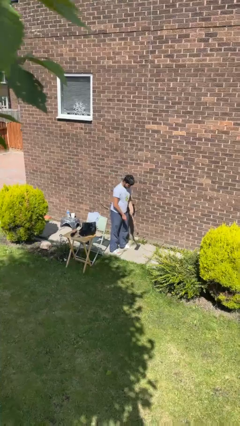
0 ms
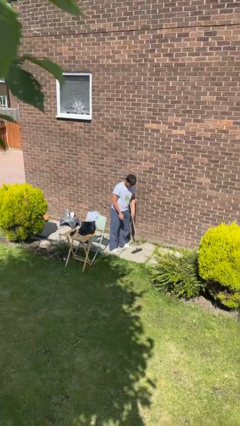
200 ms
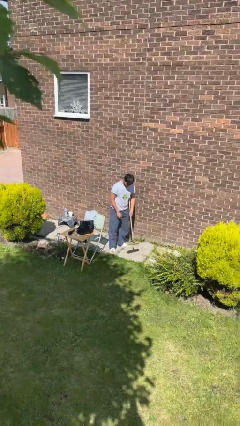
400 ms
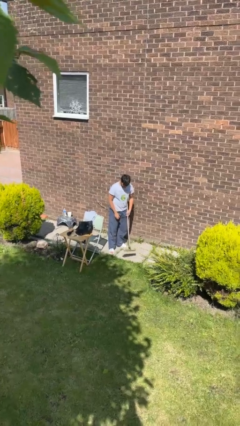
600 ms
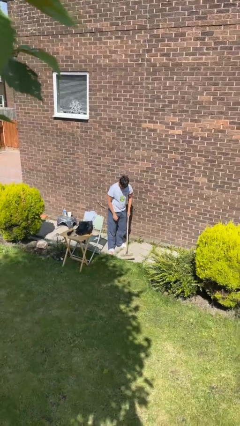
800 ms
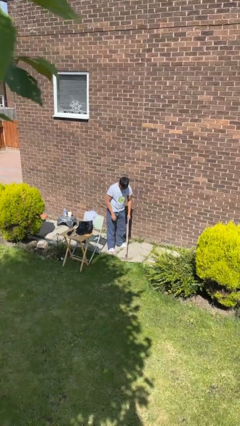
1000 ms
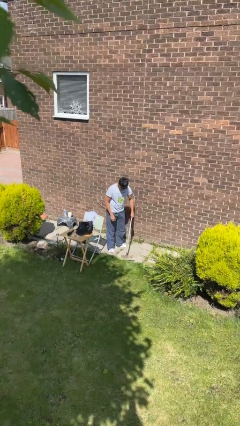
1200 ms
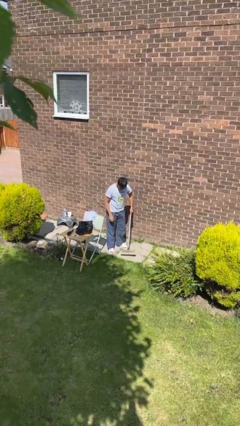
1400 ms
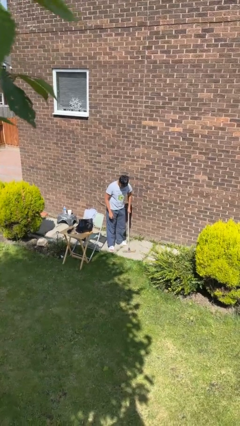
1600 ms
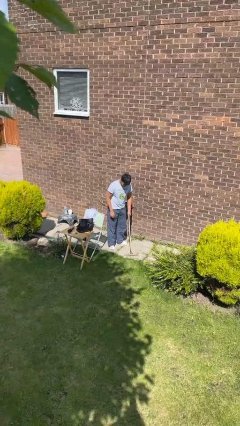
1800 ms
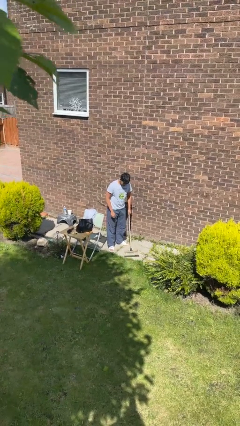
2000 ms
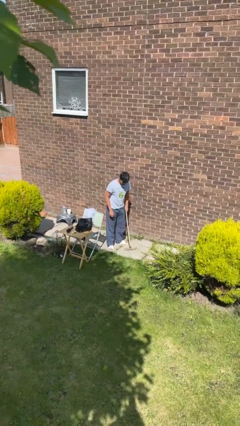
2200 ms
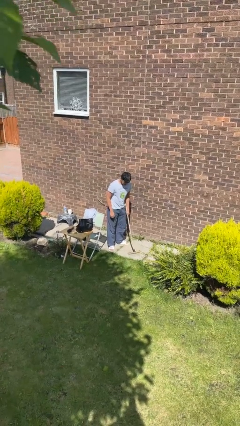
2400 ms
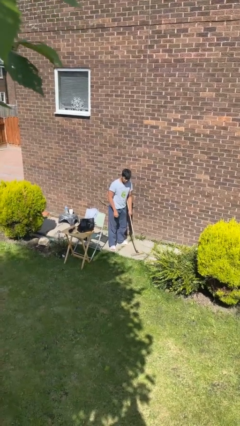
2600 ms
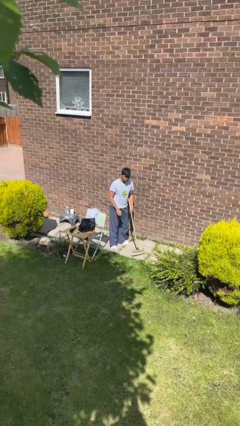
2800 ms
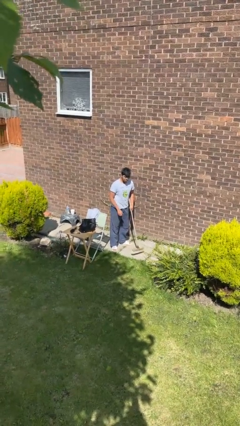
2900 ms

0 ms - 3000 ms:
person sweeps floor

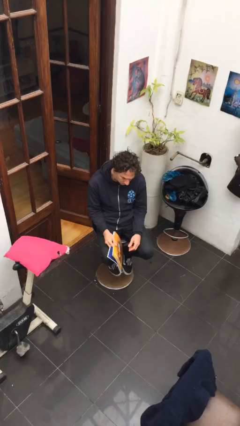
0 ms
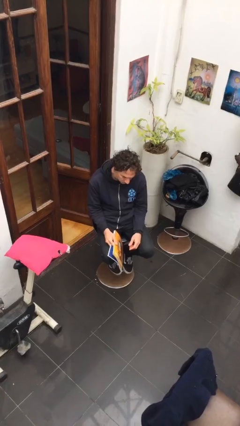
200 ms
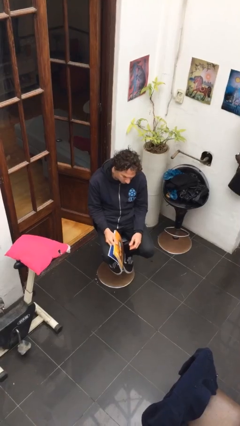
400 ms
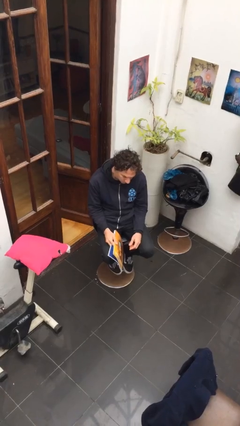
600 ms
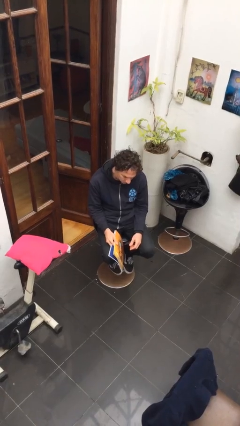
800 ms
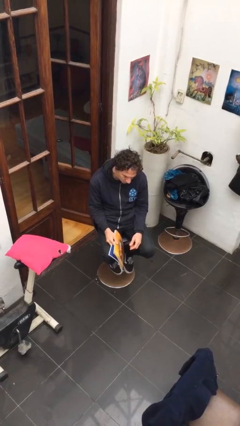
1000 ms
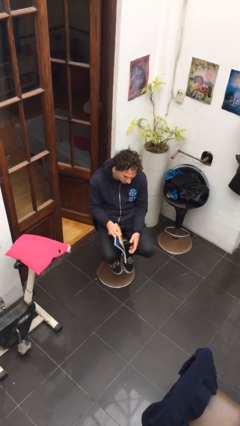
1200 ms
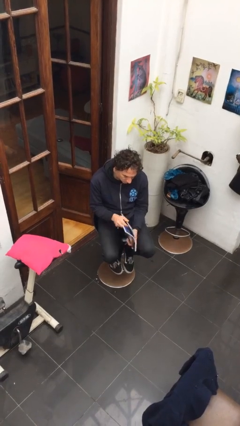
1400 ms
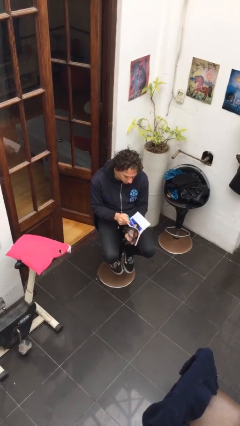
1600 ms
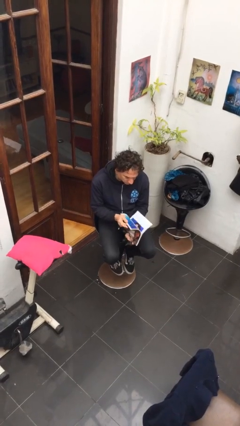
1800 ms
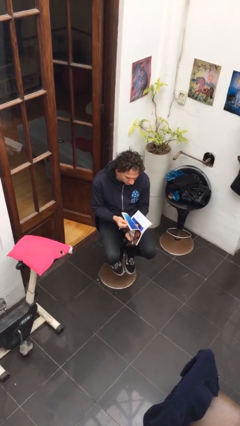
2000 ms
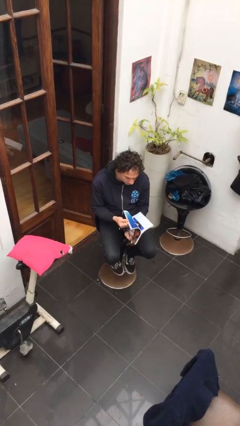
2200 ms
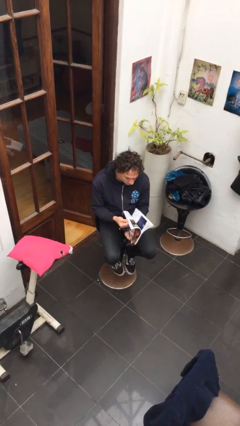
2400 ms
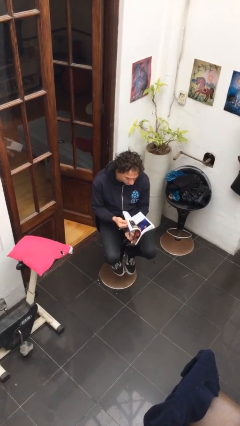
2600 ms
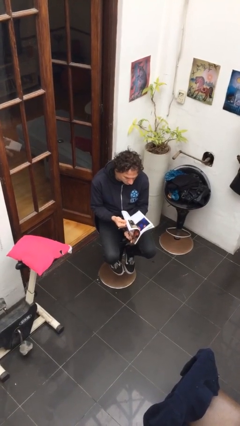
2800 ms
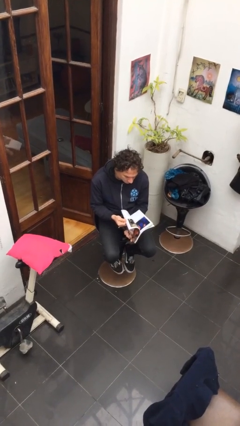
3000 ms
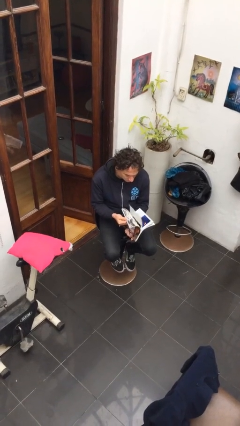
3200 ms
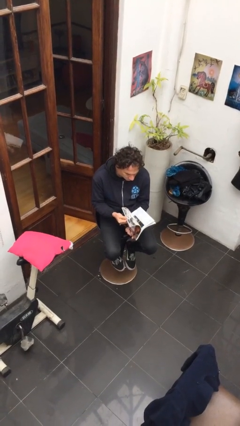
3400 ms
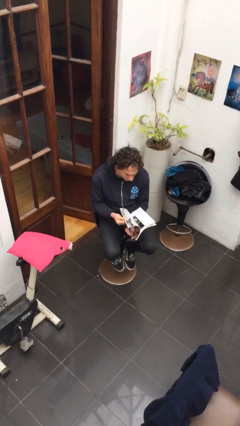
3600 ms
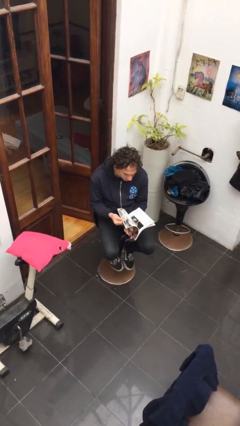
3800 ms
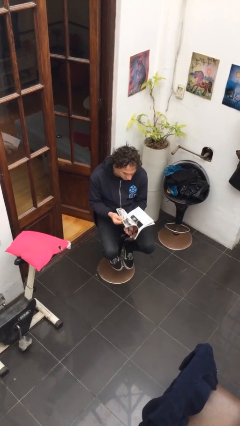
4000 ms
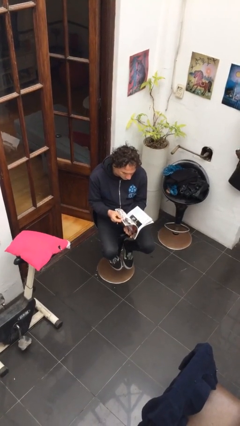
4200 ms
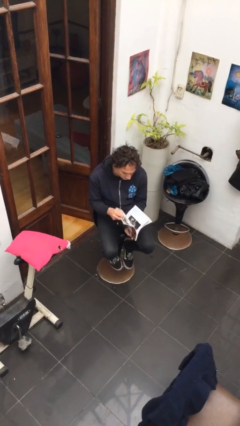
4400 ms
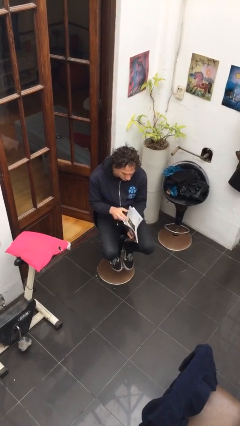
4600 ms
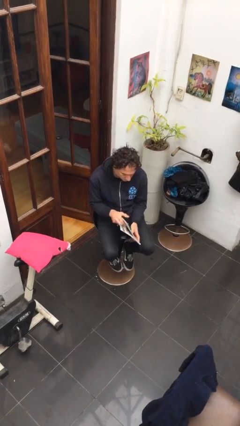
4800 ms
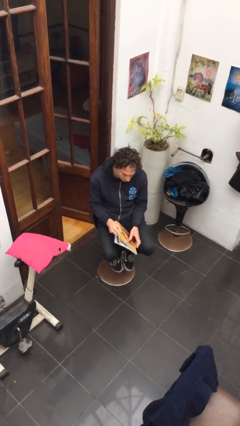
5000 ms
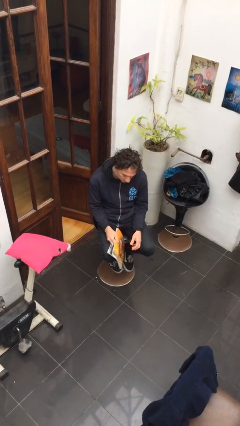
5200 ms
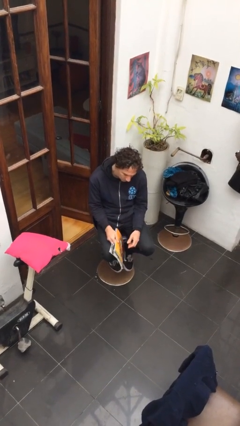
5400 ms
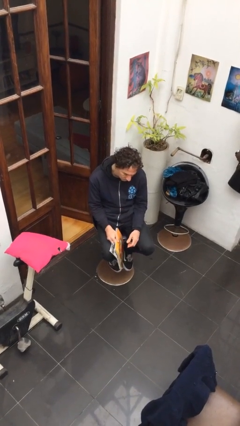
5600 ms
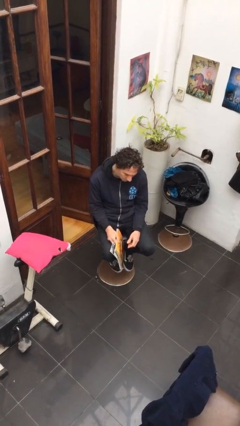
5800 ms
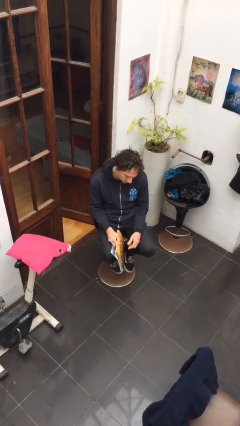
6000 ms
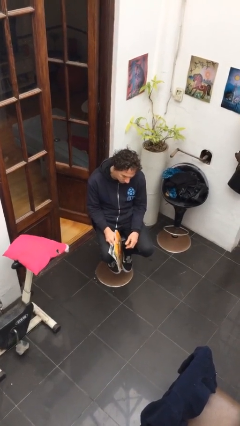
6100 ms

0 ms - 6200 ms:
person reads magazine

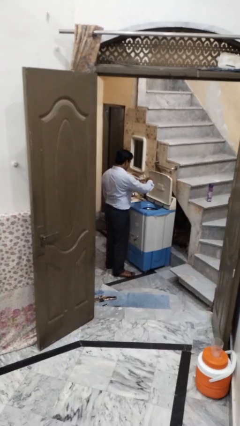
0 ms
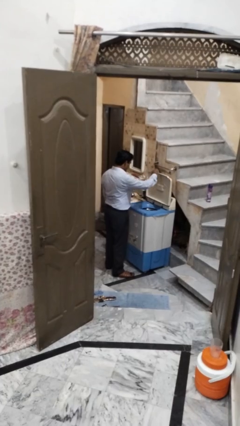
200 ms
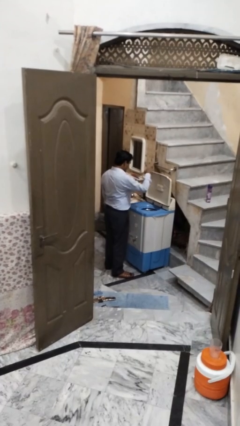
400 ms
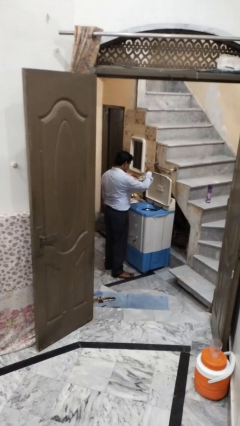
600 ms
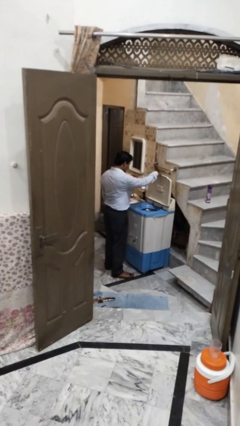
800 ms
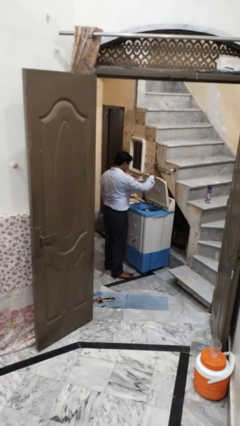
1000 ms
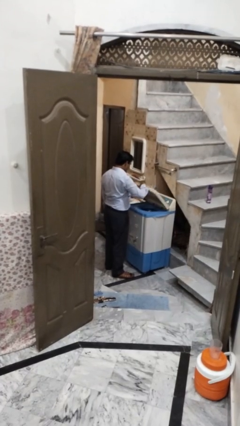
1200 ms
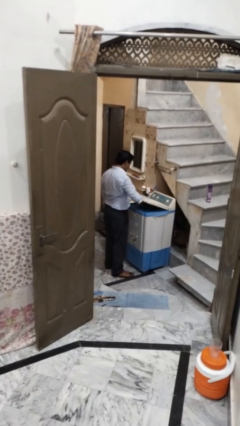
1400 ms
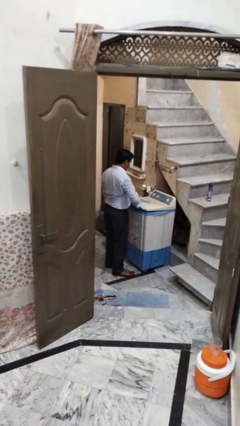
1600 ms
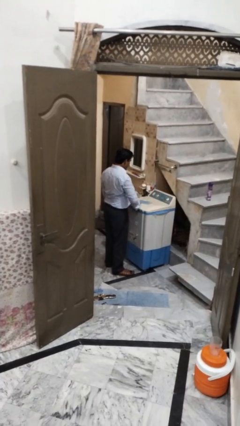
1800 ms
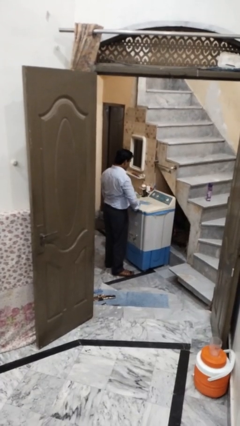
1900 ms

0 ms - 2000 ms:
person closes clothes washer

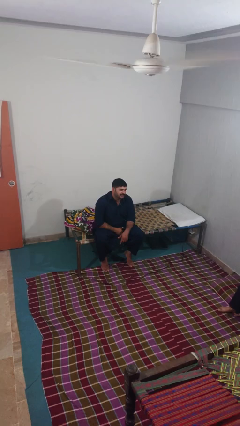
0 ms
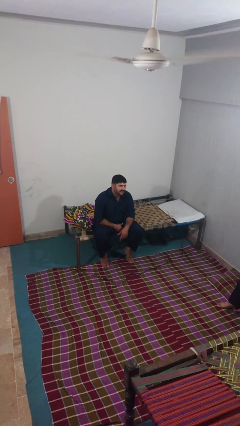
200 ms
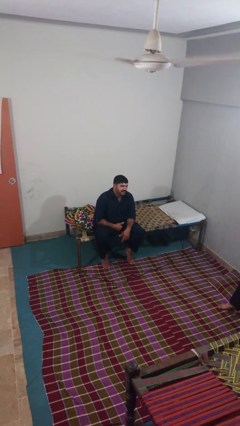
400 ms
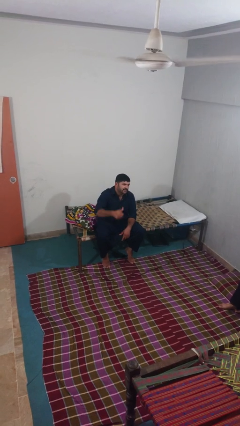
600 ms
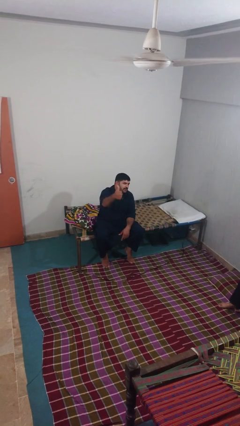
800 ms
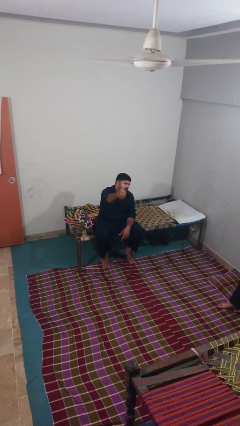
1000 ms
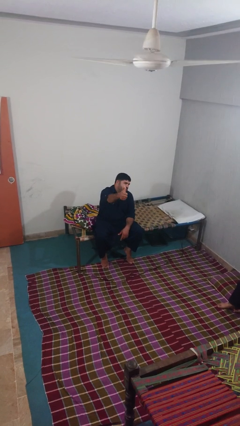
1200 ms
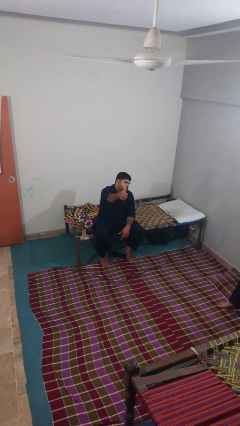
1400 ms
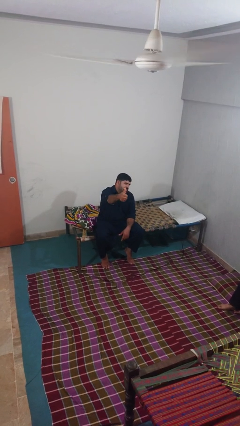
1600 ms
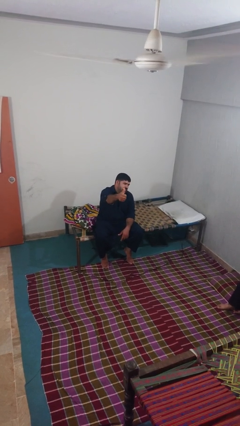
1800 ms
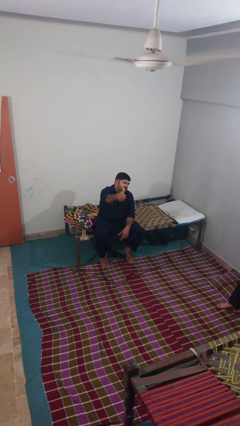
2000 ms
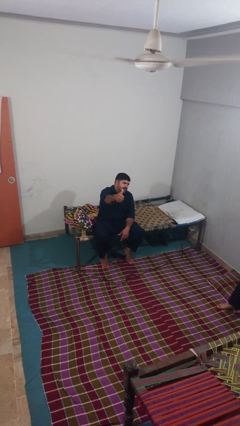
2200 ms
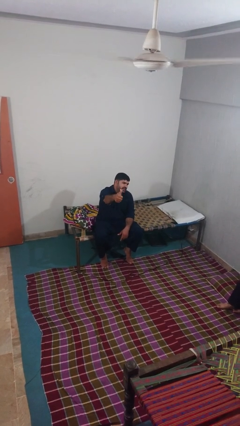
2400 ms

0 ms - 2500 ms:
person gestures thumbs up

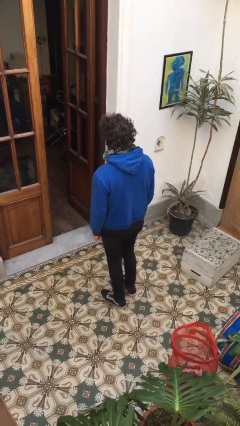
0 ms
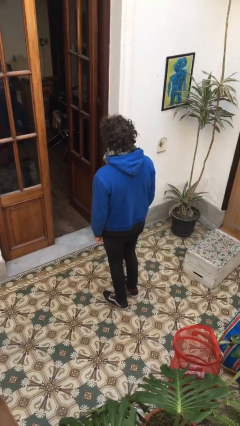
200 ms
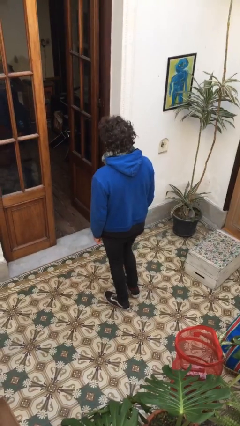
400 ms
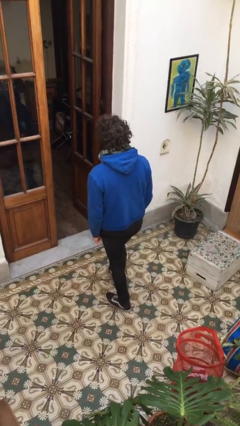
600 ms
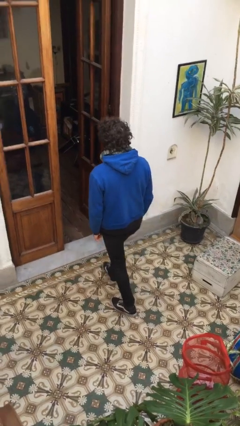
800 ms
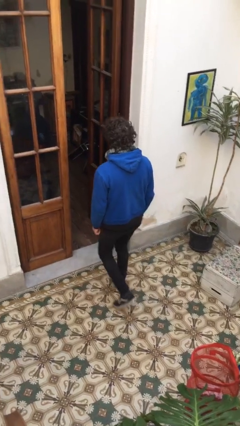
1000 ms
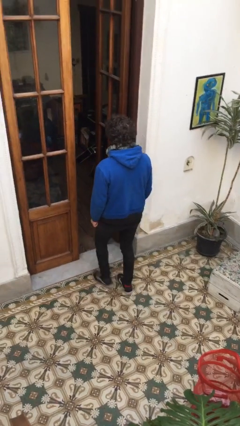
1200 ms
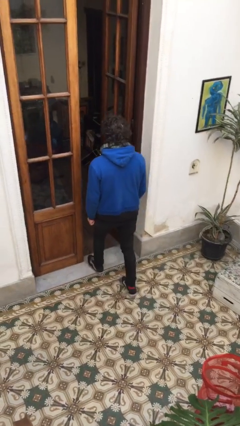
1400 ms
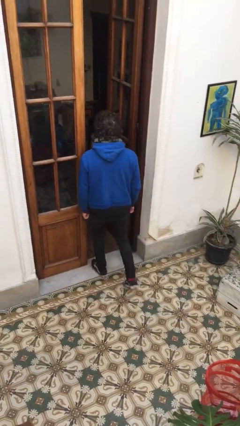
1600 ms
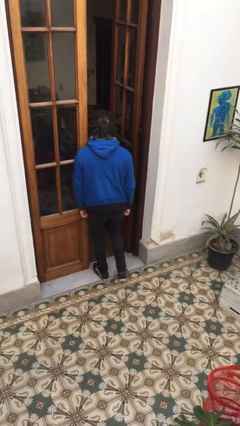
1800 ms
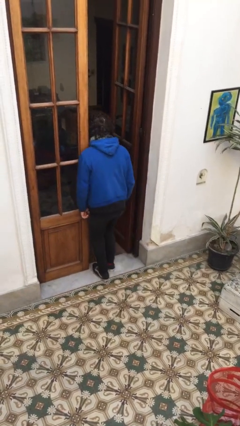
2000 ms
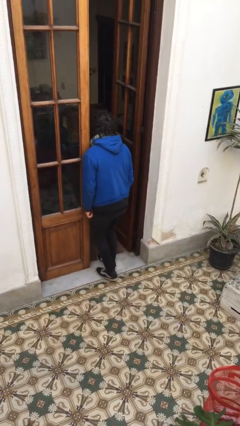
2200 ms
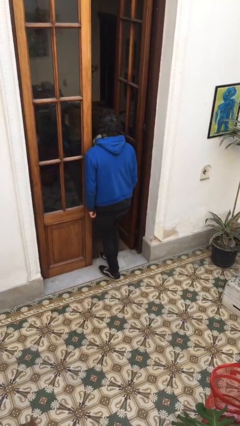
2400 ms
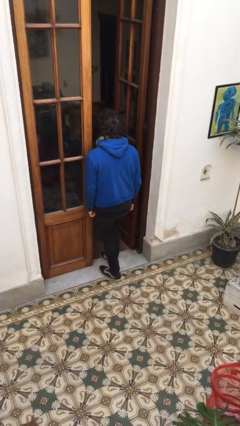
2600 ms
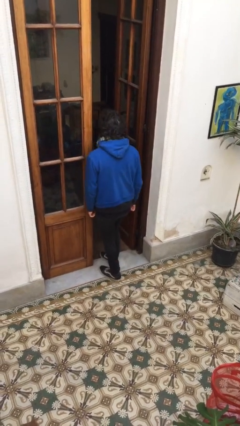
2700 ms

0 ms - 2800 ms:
person bumps into wall

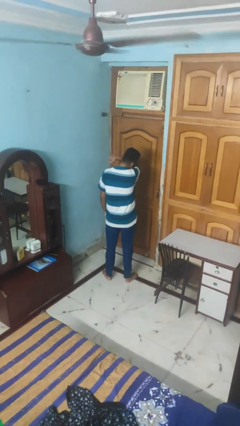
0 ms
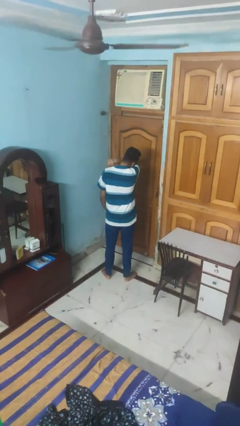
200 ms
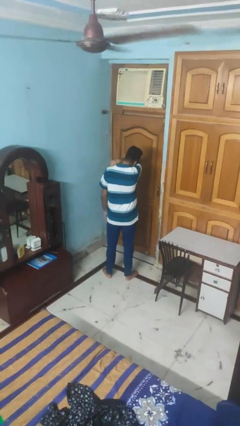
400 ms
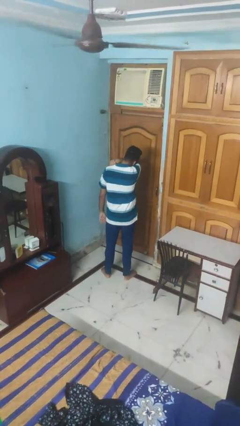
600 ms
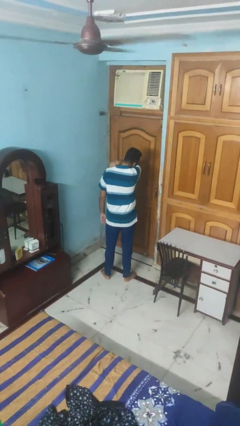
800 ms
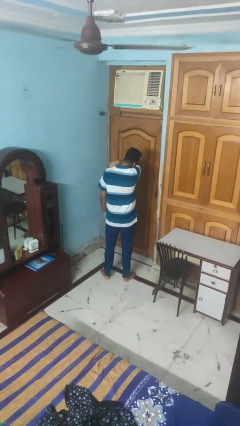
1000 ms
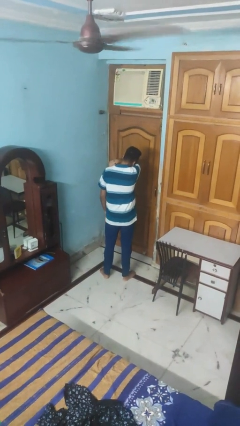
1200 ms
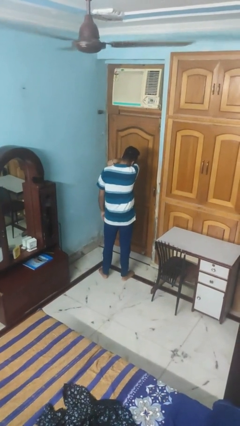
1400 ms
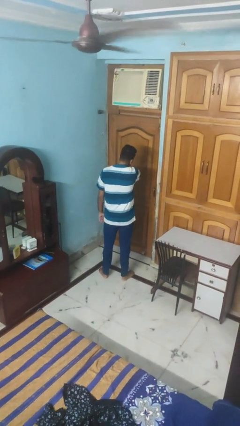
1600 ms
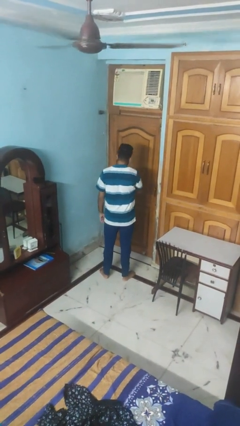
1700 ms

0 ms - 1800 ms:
person sneezes into arm
